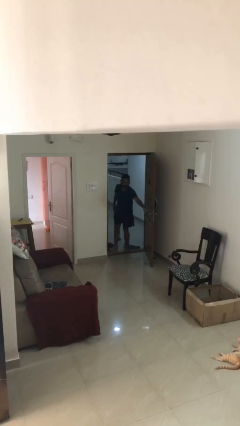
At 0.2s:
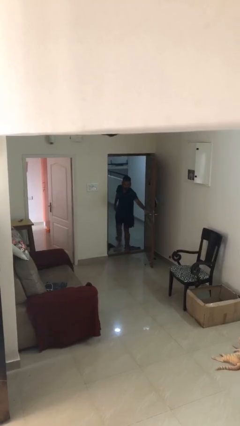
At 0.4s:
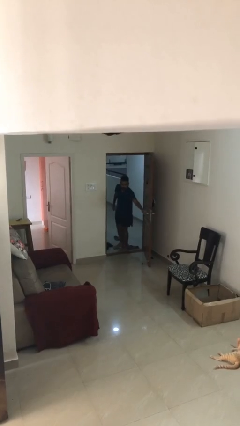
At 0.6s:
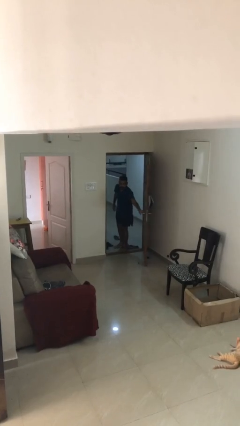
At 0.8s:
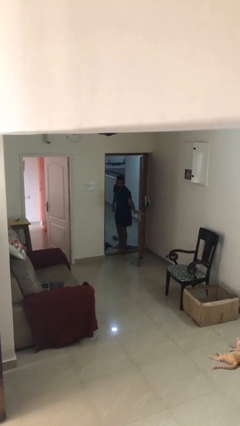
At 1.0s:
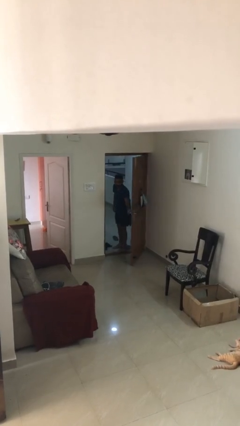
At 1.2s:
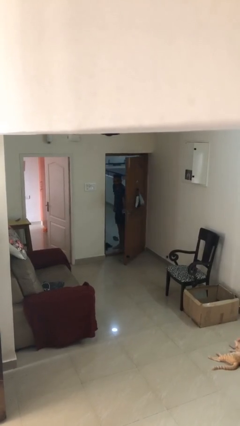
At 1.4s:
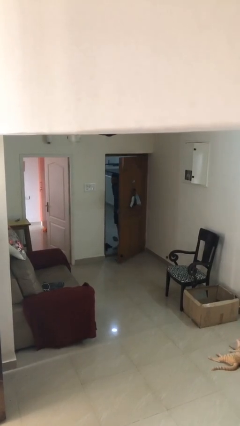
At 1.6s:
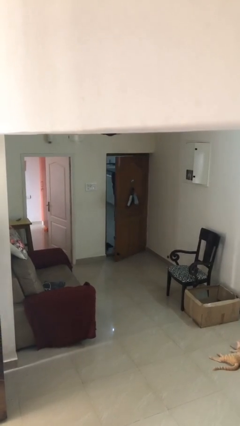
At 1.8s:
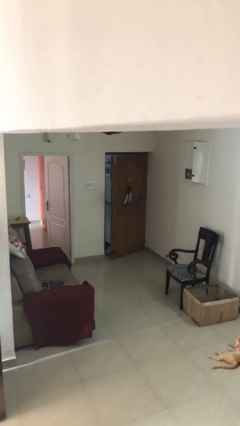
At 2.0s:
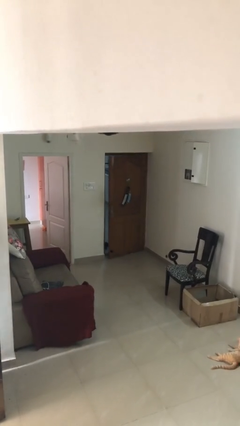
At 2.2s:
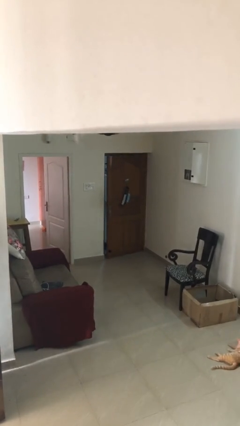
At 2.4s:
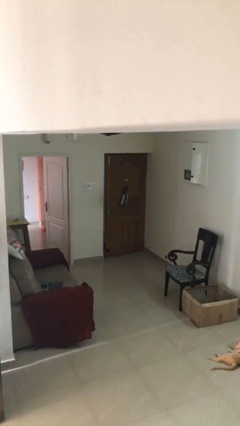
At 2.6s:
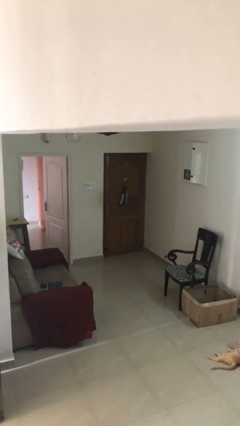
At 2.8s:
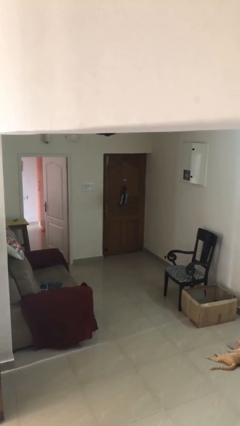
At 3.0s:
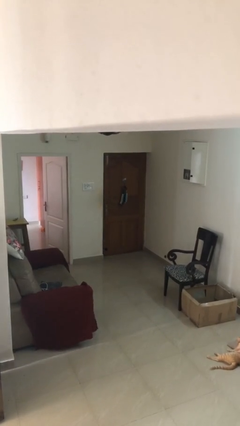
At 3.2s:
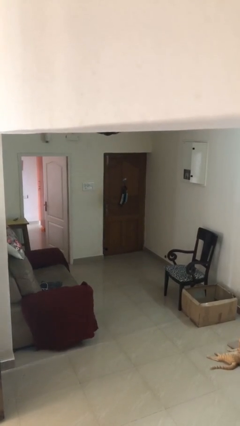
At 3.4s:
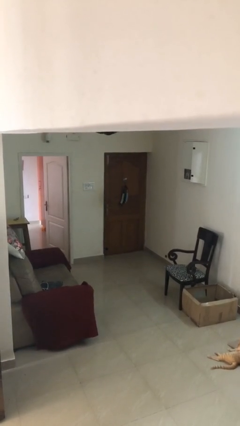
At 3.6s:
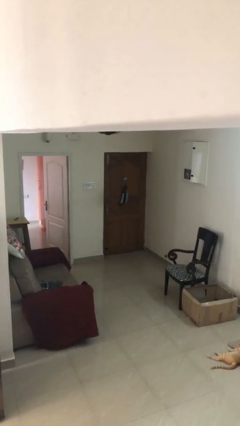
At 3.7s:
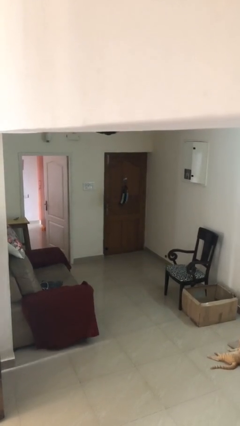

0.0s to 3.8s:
person closes facility door

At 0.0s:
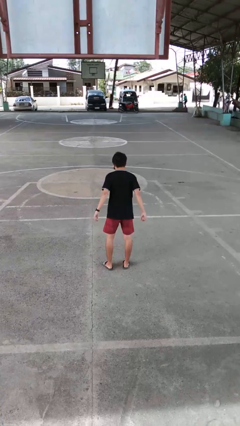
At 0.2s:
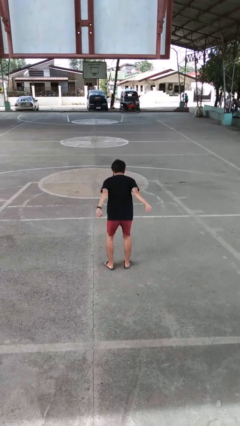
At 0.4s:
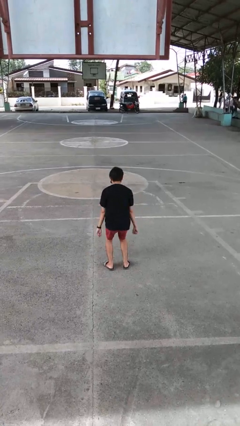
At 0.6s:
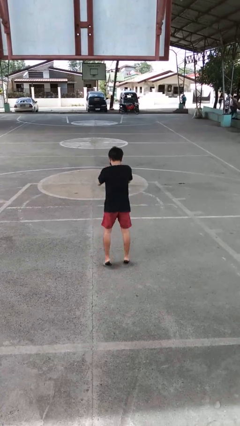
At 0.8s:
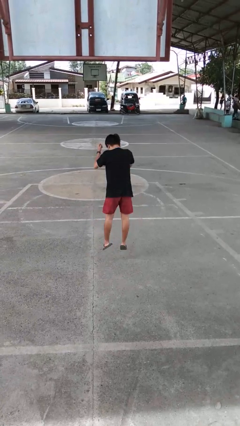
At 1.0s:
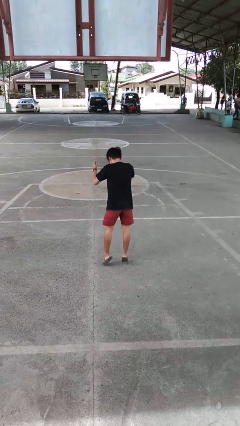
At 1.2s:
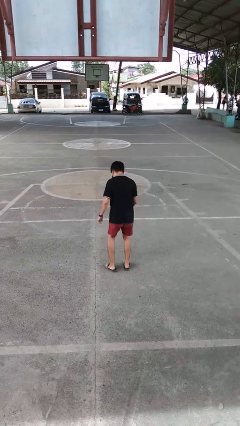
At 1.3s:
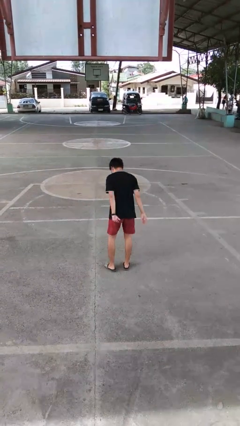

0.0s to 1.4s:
person jumps

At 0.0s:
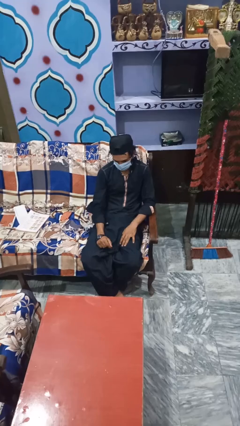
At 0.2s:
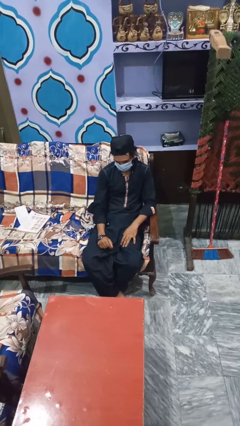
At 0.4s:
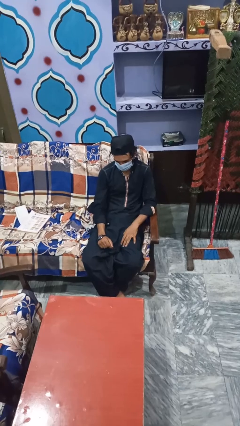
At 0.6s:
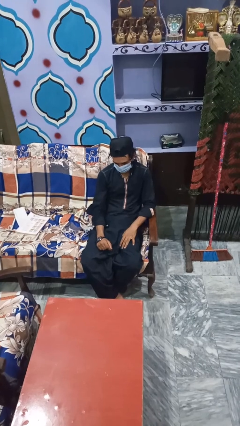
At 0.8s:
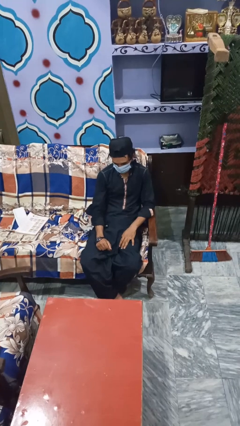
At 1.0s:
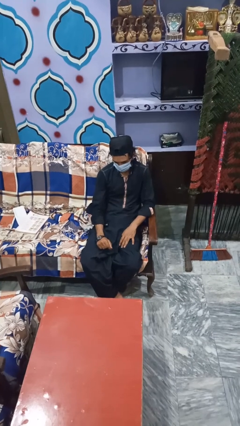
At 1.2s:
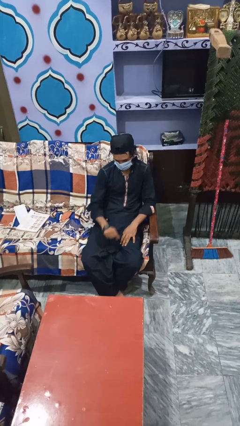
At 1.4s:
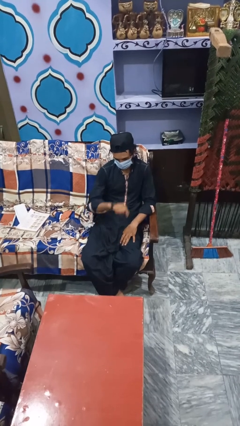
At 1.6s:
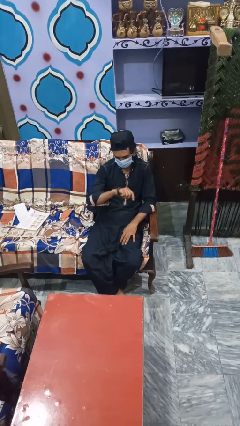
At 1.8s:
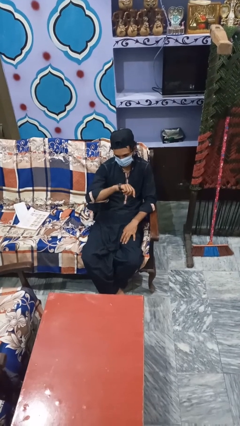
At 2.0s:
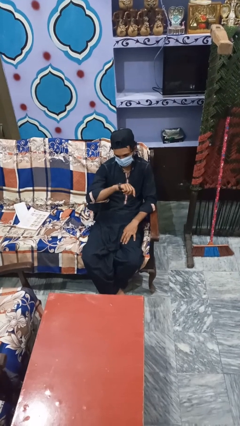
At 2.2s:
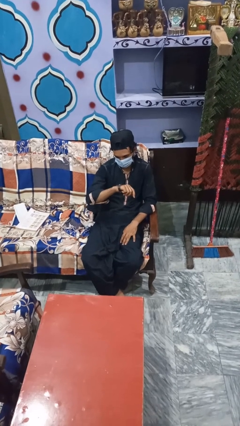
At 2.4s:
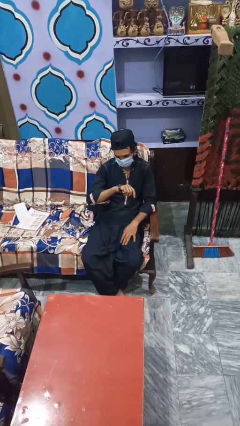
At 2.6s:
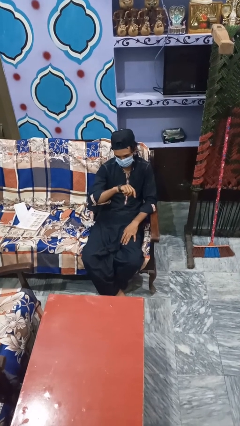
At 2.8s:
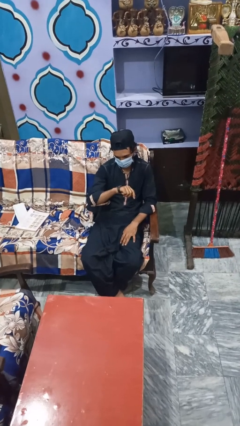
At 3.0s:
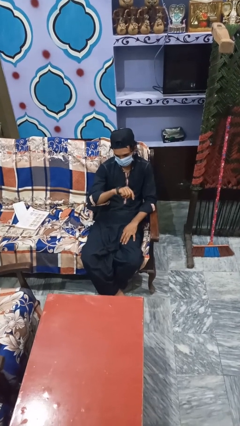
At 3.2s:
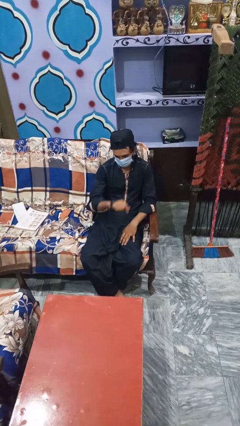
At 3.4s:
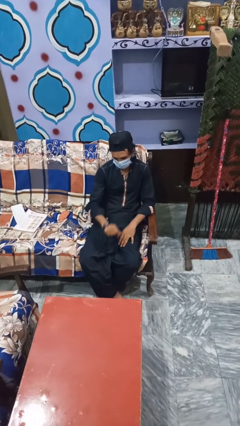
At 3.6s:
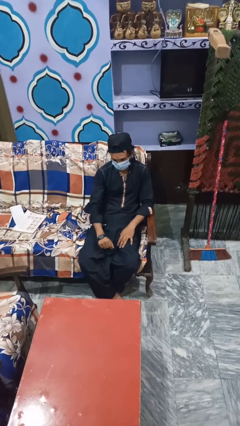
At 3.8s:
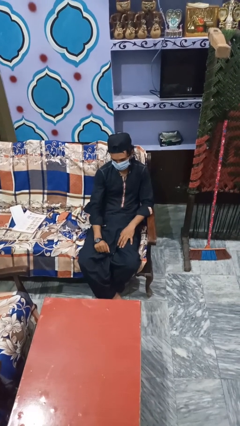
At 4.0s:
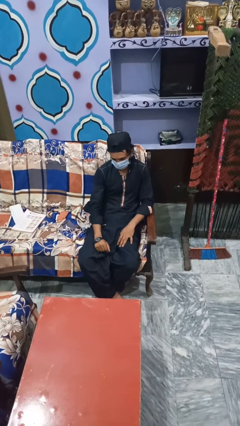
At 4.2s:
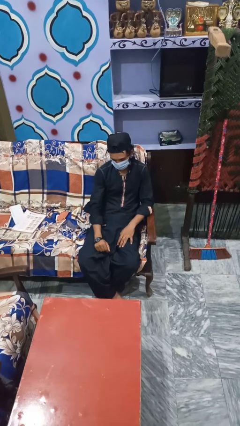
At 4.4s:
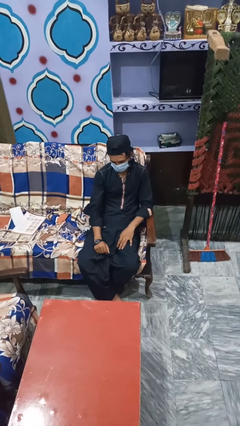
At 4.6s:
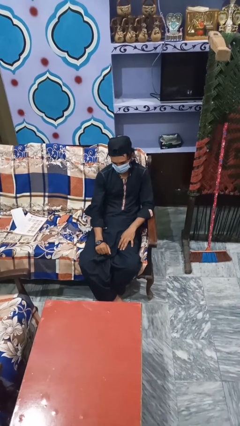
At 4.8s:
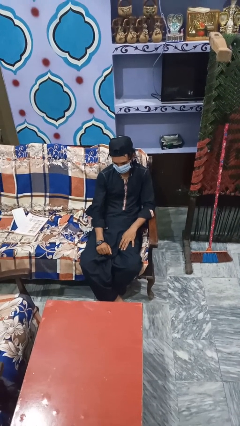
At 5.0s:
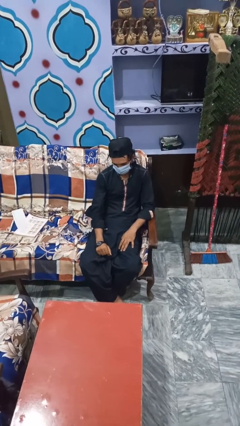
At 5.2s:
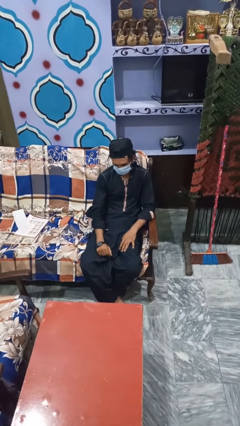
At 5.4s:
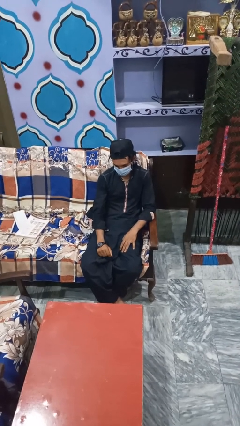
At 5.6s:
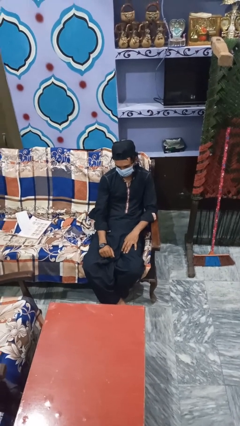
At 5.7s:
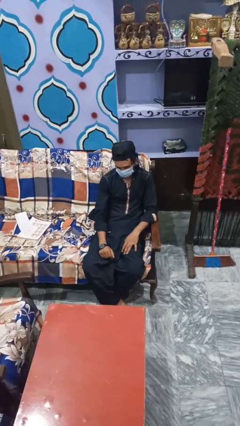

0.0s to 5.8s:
person looks at wristwatch

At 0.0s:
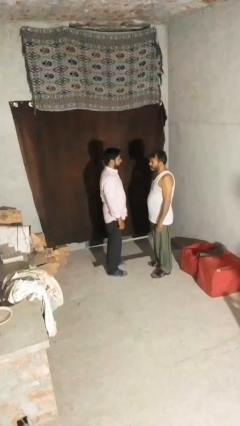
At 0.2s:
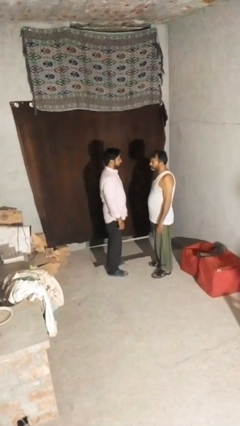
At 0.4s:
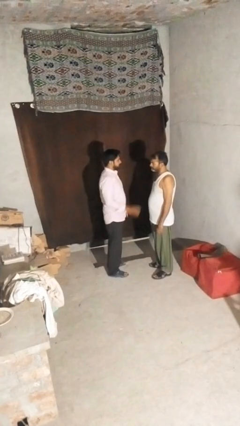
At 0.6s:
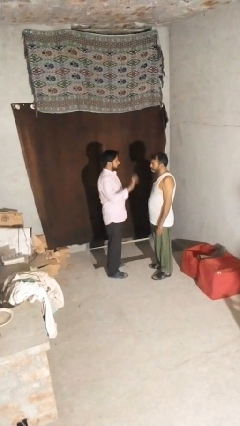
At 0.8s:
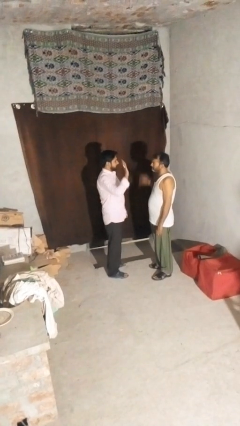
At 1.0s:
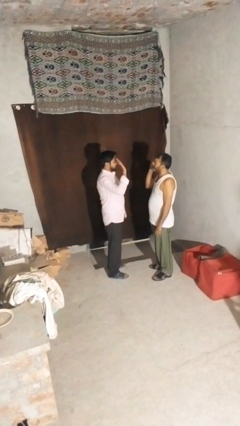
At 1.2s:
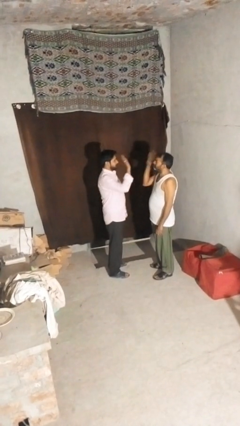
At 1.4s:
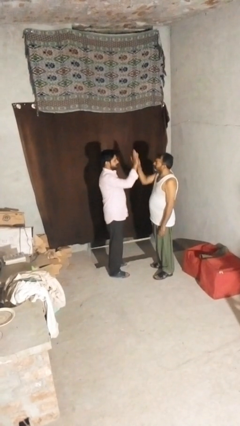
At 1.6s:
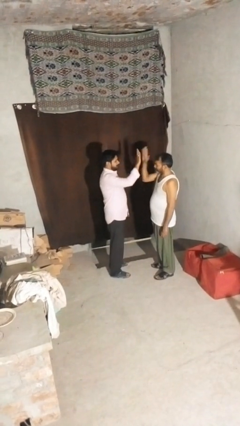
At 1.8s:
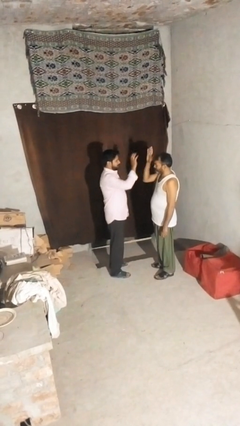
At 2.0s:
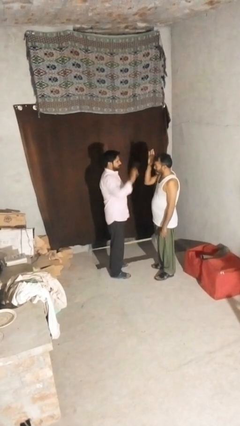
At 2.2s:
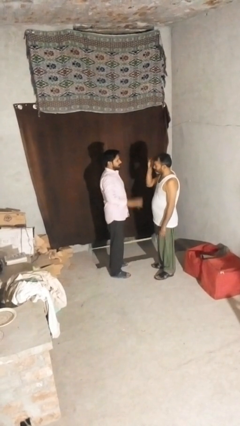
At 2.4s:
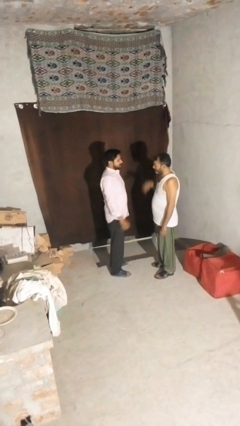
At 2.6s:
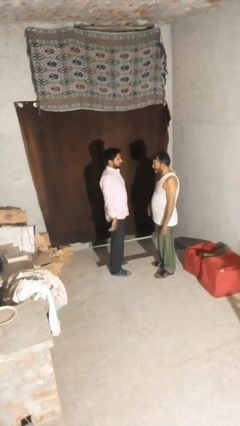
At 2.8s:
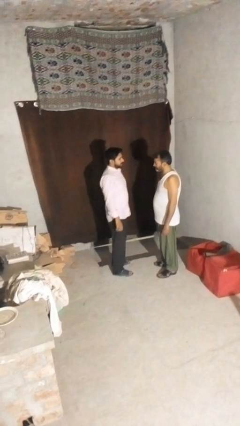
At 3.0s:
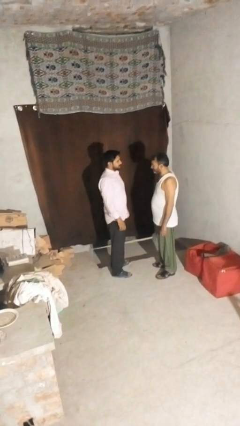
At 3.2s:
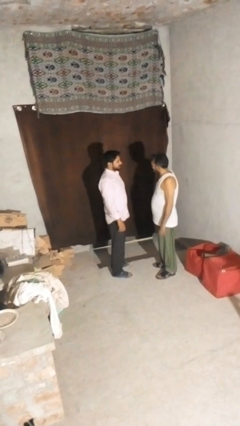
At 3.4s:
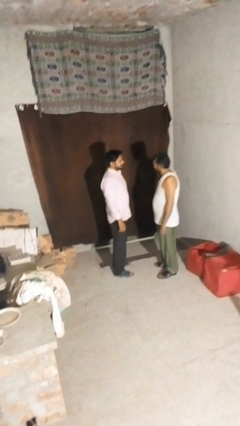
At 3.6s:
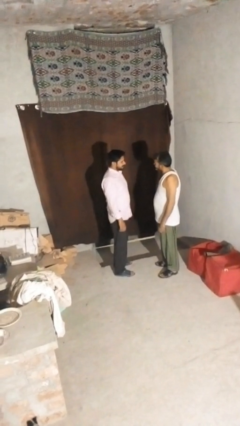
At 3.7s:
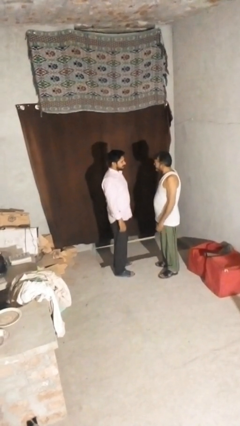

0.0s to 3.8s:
person highfives hand

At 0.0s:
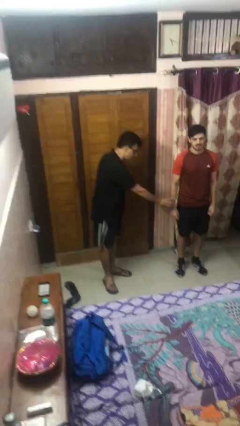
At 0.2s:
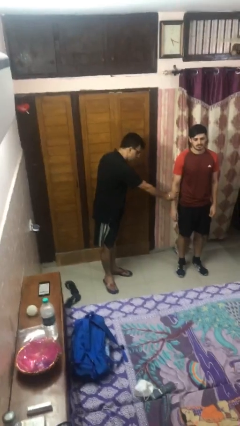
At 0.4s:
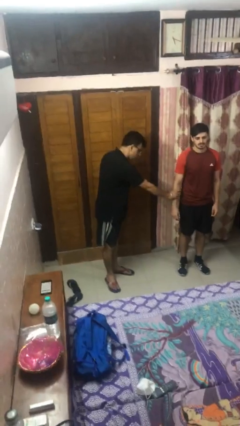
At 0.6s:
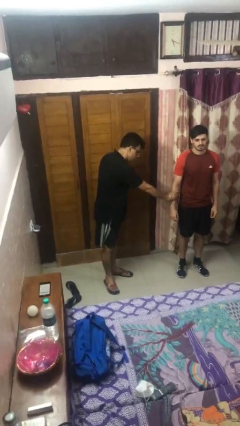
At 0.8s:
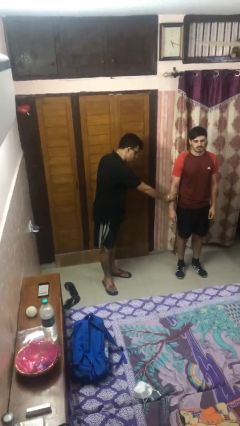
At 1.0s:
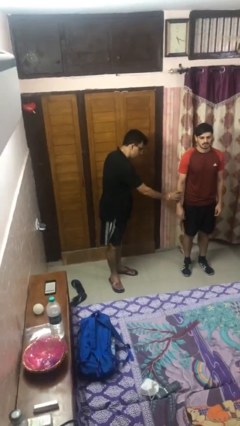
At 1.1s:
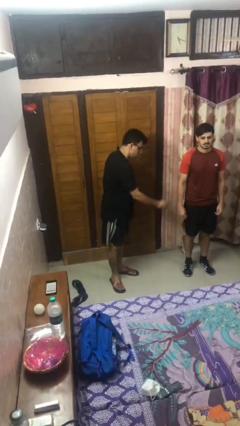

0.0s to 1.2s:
person grabs person by forearm

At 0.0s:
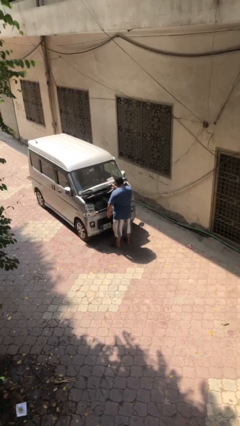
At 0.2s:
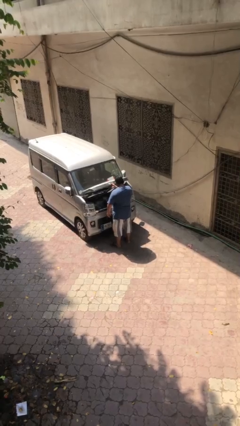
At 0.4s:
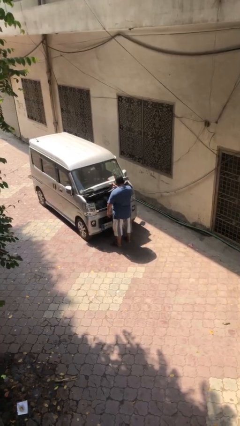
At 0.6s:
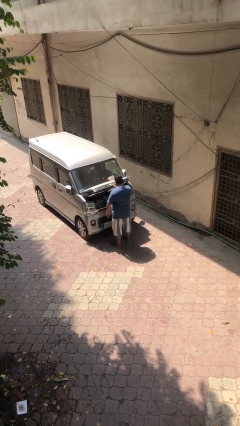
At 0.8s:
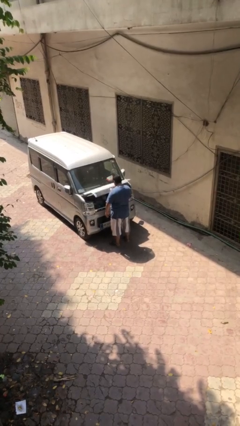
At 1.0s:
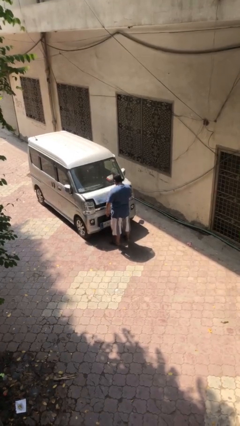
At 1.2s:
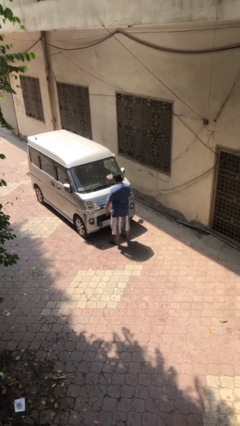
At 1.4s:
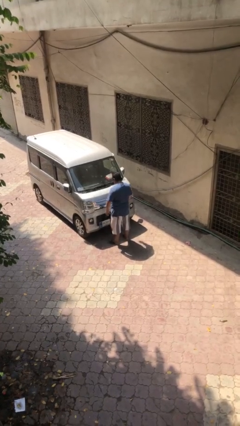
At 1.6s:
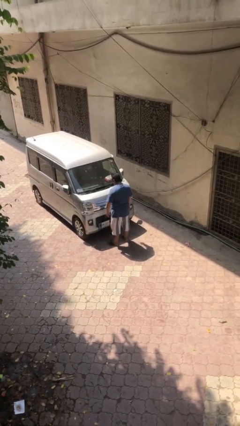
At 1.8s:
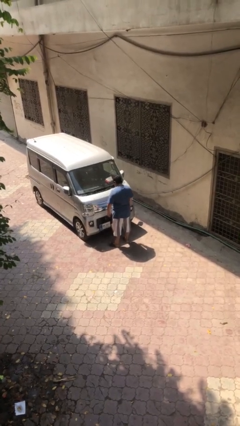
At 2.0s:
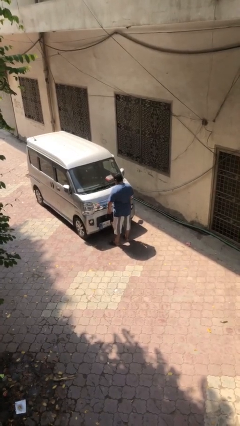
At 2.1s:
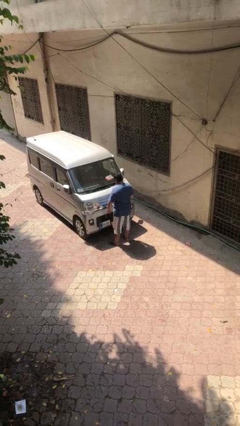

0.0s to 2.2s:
person closes car hood
